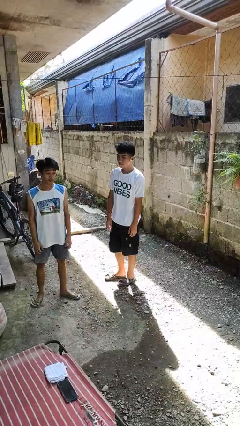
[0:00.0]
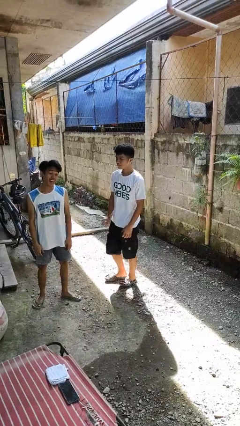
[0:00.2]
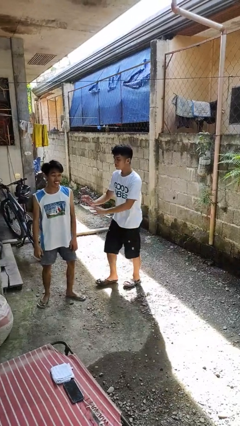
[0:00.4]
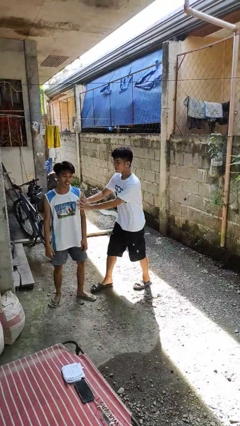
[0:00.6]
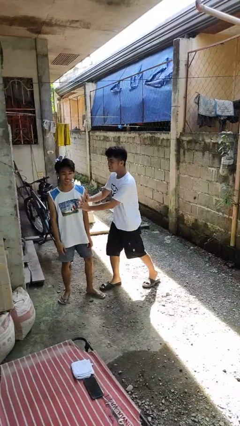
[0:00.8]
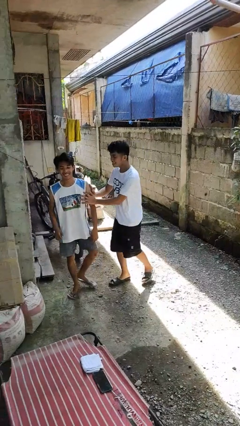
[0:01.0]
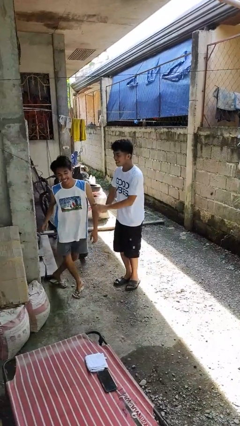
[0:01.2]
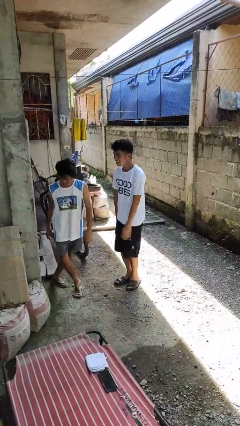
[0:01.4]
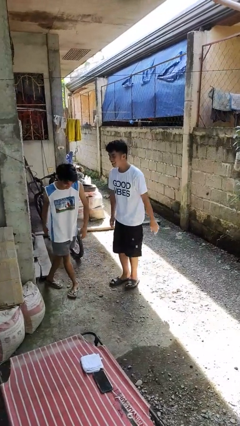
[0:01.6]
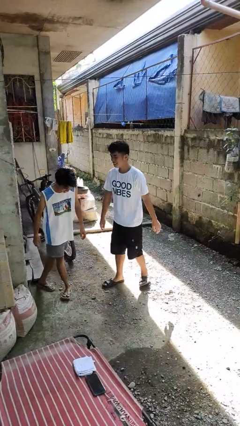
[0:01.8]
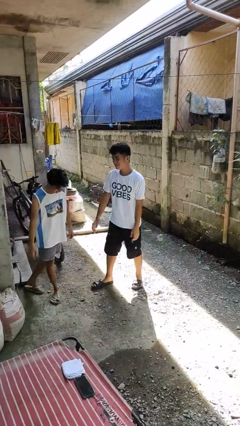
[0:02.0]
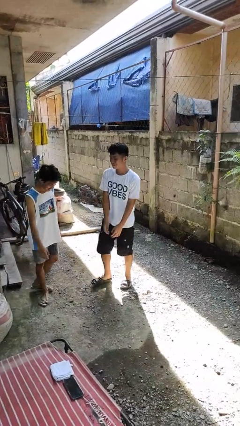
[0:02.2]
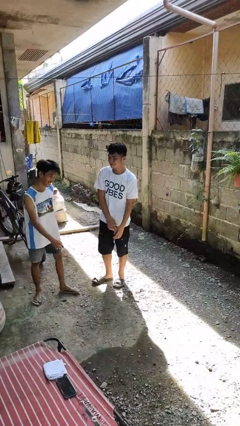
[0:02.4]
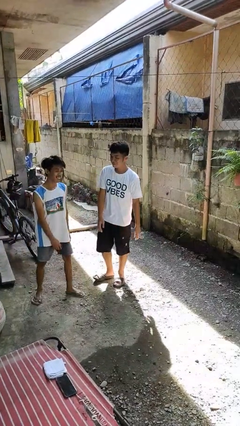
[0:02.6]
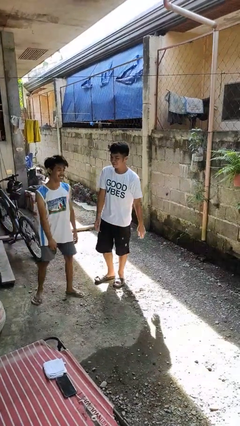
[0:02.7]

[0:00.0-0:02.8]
person shoves person

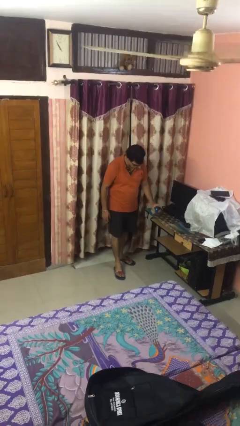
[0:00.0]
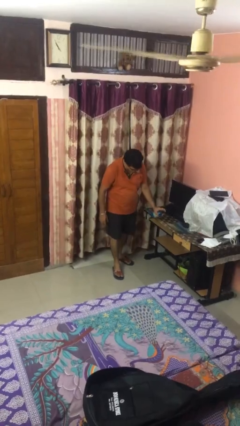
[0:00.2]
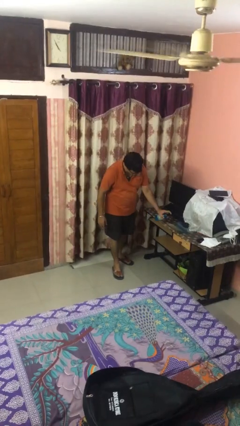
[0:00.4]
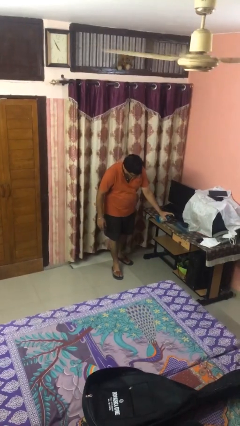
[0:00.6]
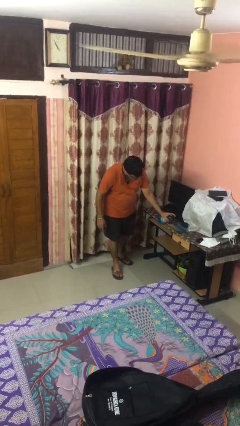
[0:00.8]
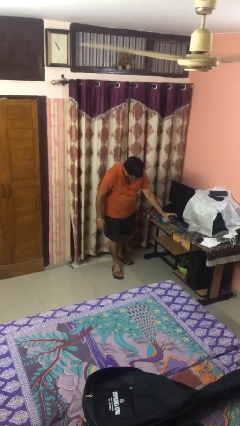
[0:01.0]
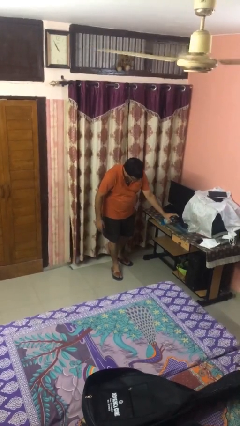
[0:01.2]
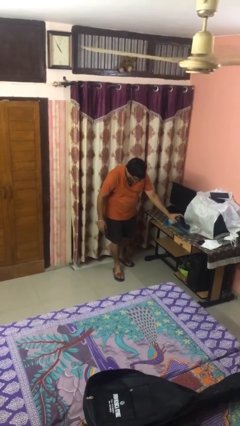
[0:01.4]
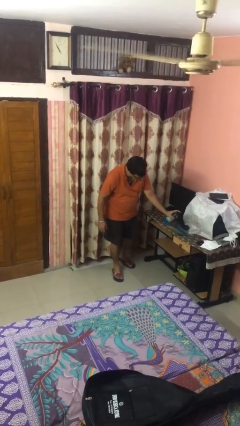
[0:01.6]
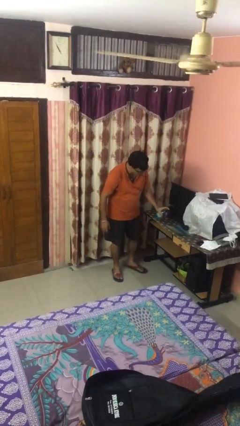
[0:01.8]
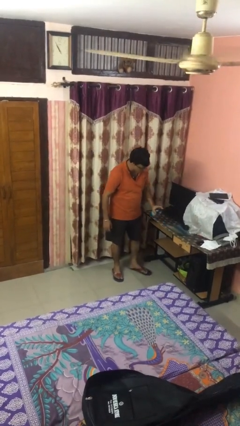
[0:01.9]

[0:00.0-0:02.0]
person sprays from bottle

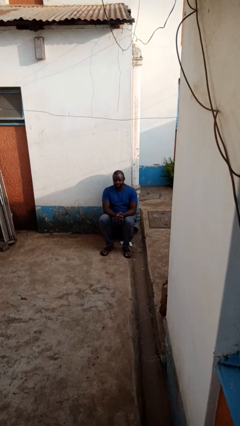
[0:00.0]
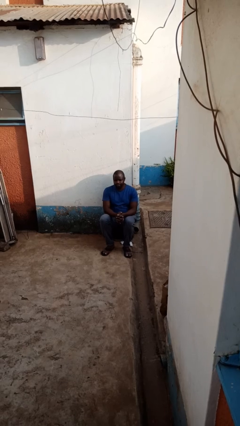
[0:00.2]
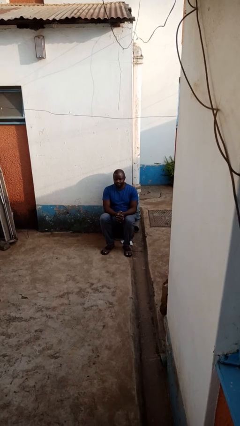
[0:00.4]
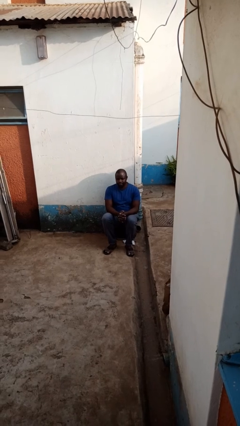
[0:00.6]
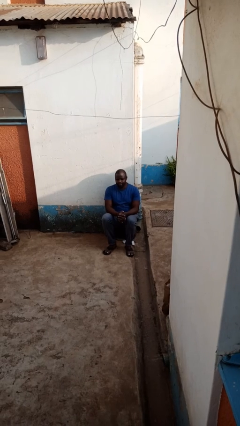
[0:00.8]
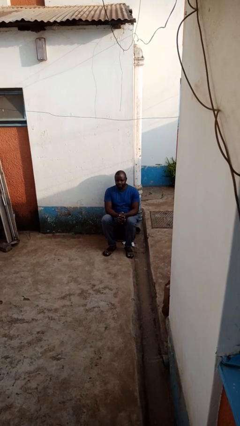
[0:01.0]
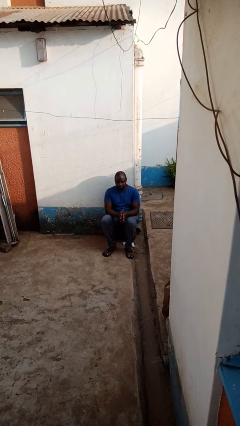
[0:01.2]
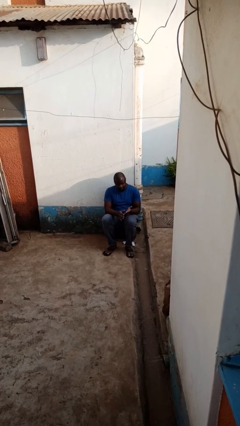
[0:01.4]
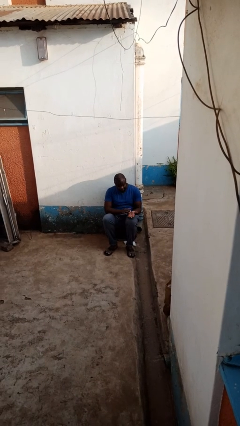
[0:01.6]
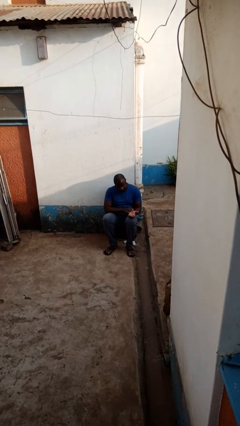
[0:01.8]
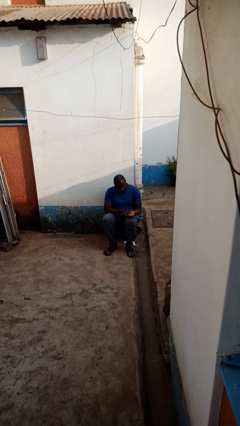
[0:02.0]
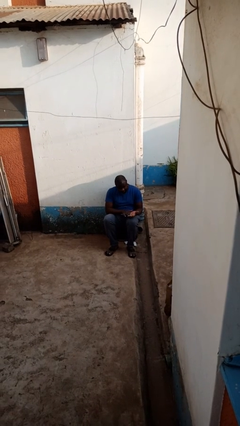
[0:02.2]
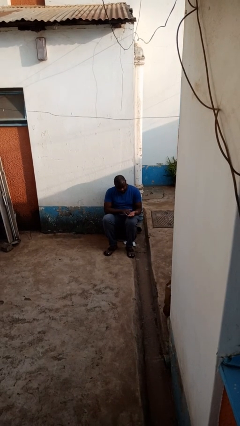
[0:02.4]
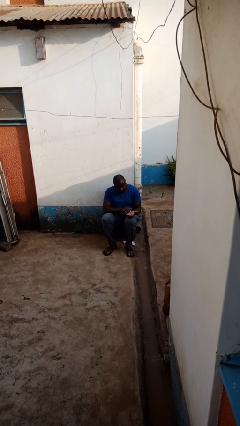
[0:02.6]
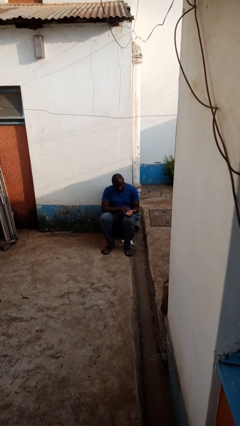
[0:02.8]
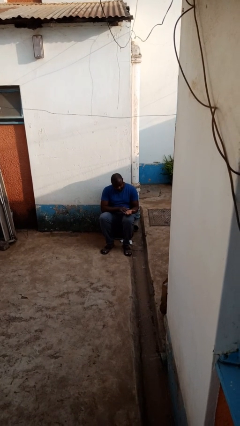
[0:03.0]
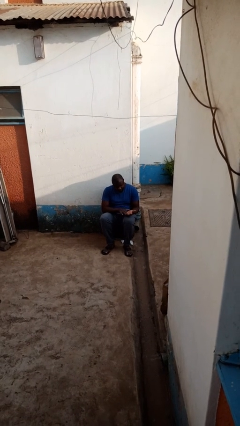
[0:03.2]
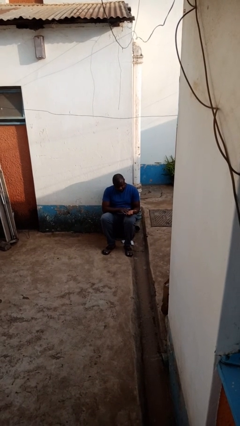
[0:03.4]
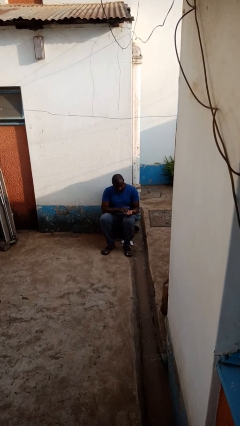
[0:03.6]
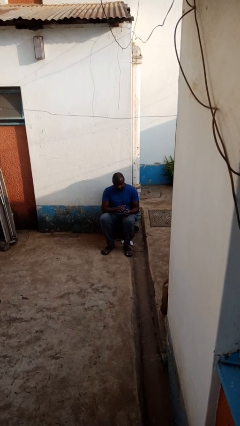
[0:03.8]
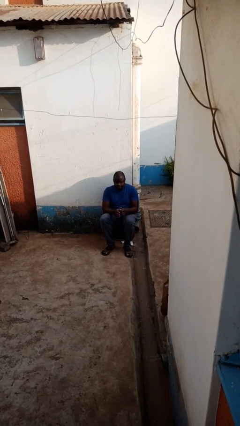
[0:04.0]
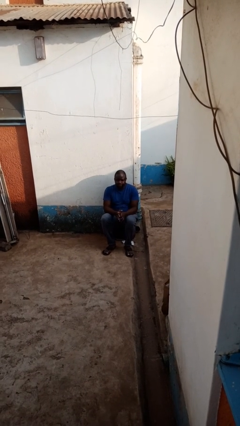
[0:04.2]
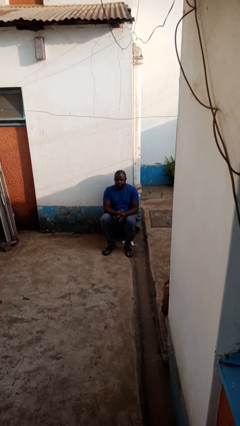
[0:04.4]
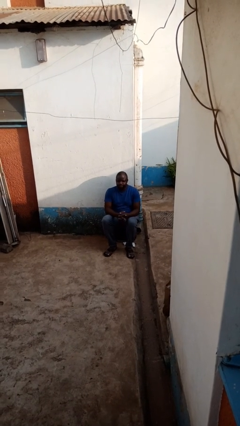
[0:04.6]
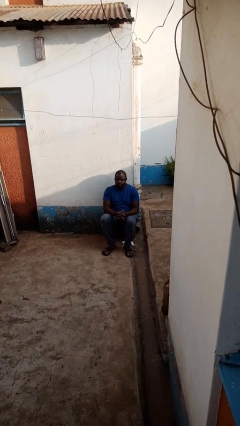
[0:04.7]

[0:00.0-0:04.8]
person looks at hands in lap

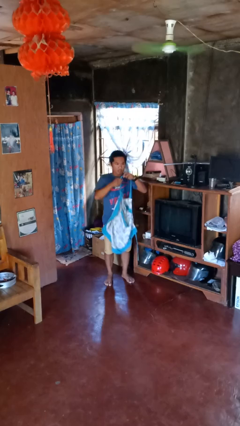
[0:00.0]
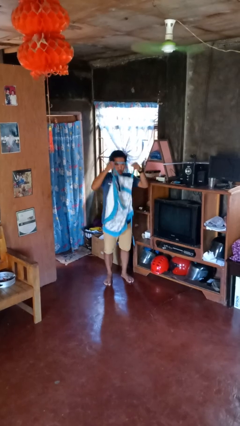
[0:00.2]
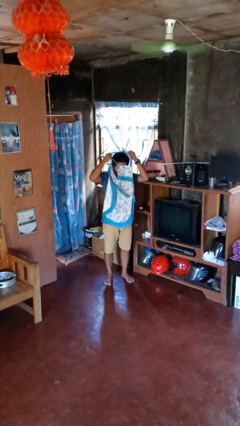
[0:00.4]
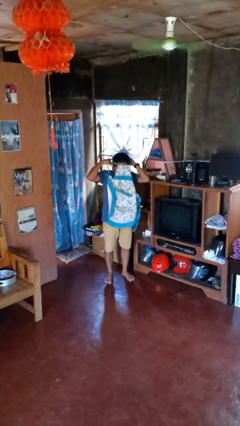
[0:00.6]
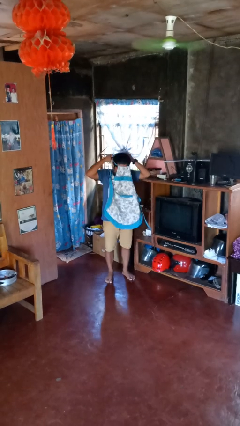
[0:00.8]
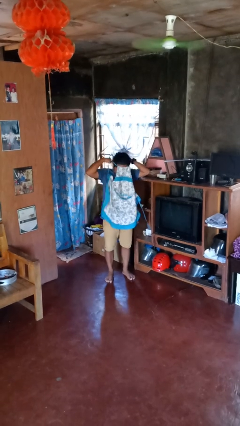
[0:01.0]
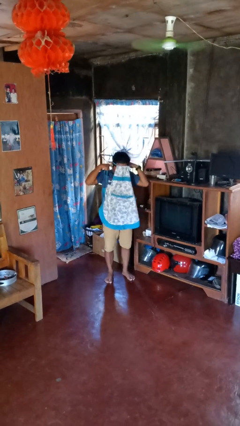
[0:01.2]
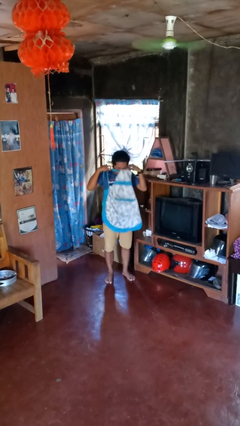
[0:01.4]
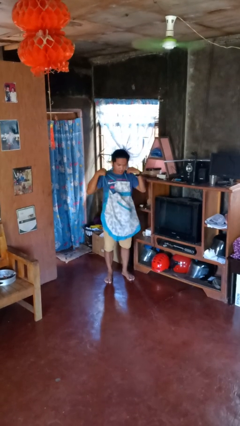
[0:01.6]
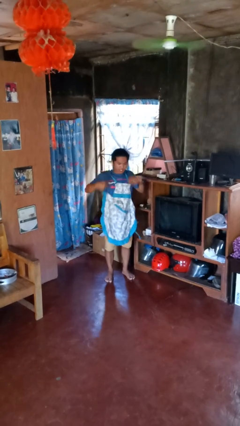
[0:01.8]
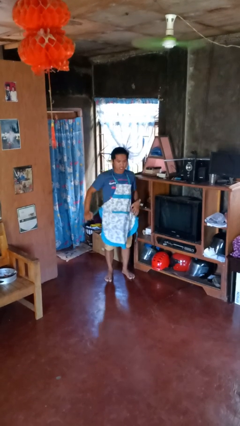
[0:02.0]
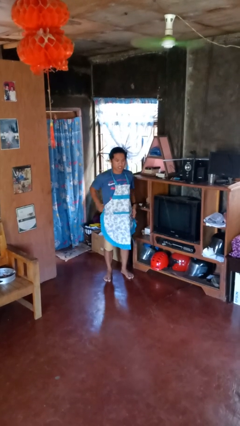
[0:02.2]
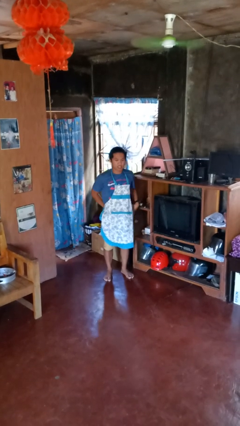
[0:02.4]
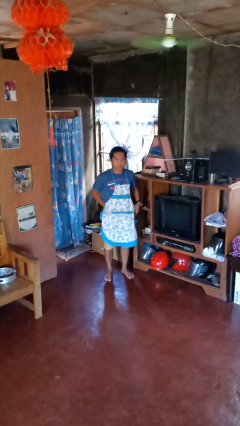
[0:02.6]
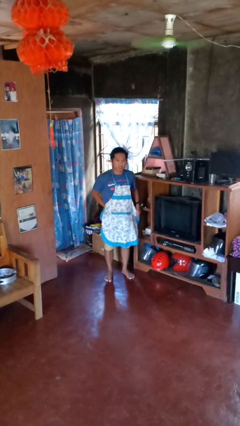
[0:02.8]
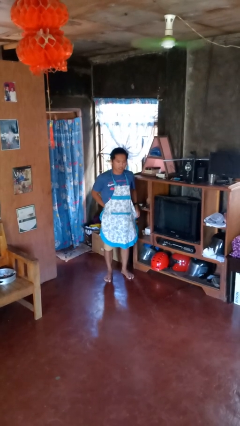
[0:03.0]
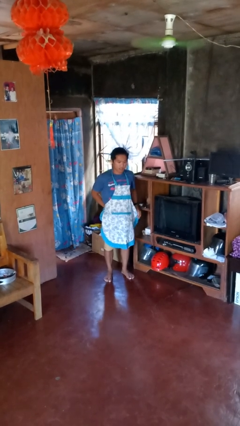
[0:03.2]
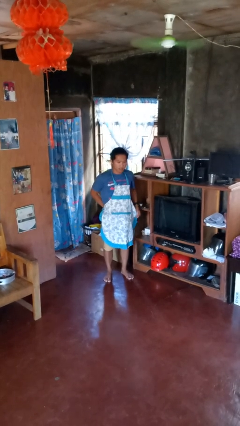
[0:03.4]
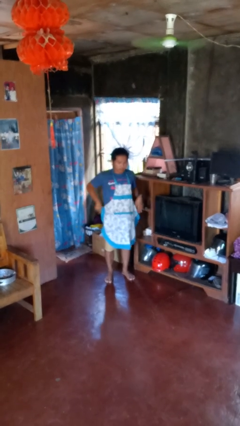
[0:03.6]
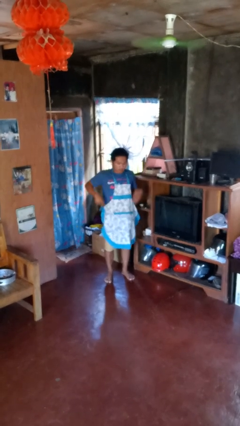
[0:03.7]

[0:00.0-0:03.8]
person puts on apron

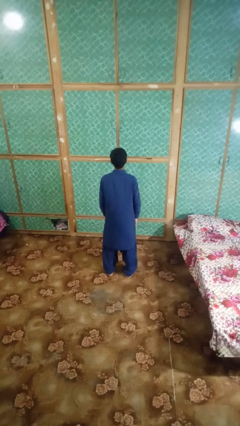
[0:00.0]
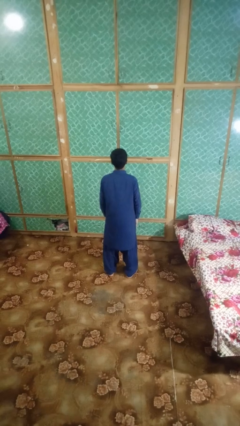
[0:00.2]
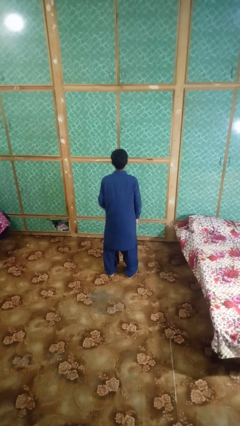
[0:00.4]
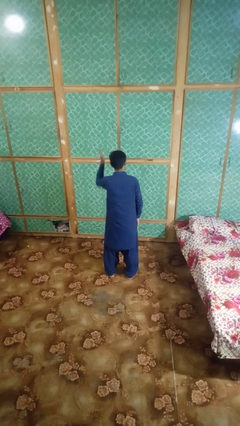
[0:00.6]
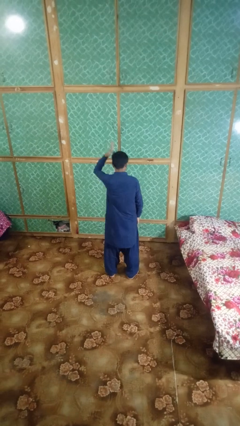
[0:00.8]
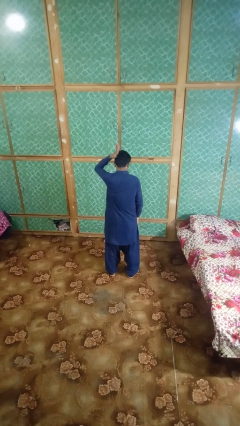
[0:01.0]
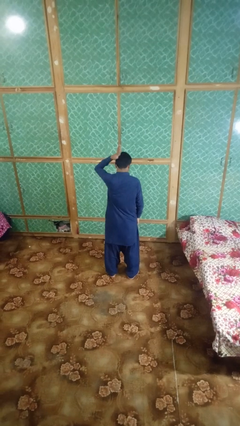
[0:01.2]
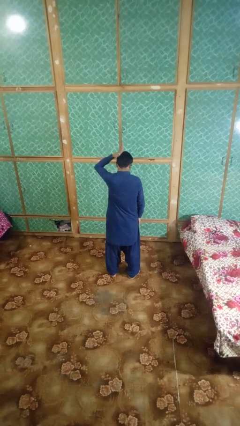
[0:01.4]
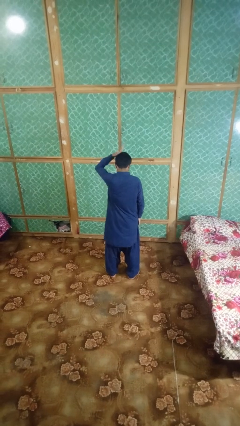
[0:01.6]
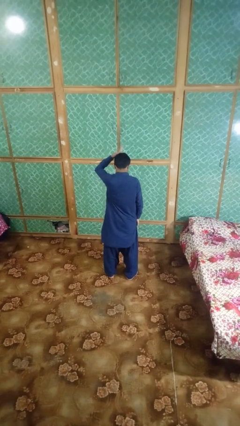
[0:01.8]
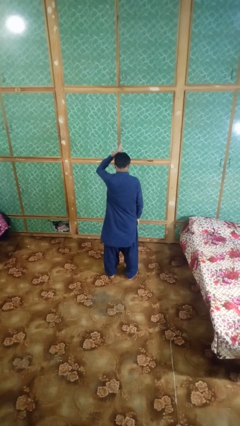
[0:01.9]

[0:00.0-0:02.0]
person pats head

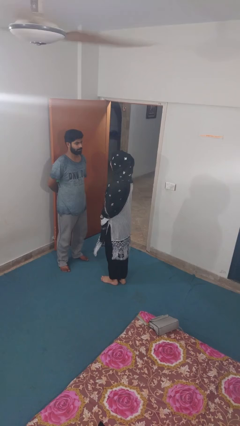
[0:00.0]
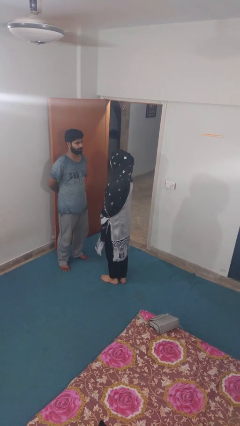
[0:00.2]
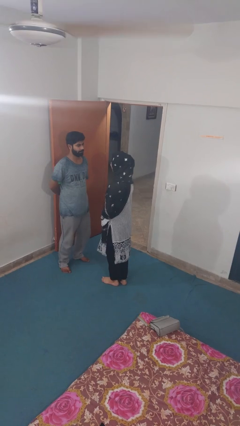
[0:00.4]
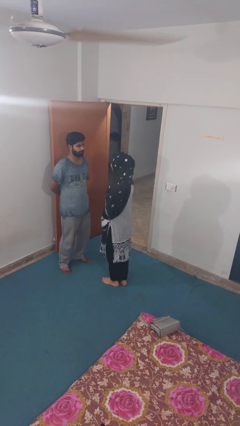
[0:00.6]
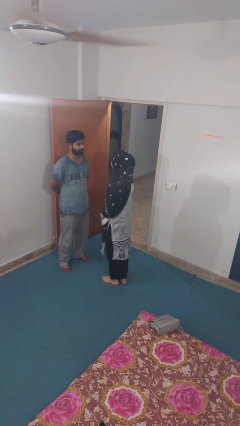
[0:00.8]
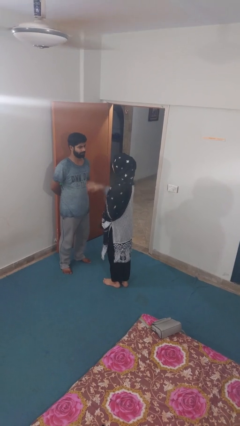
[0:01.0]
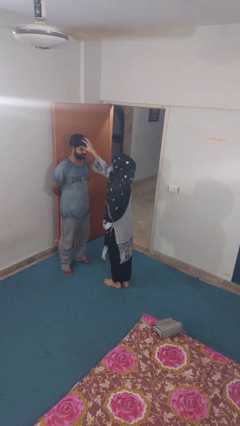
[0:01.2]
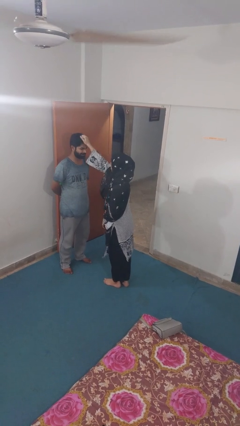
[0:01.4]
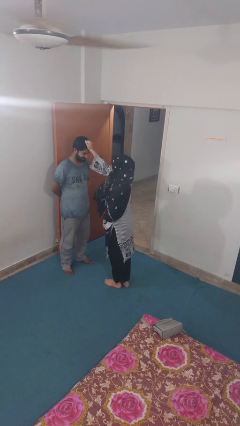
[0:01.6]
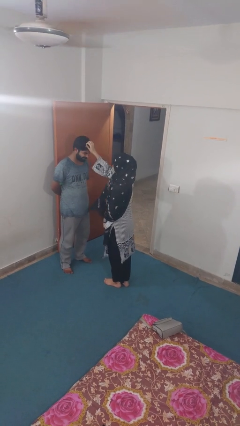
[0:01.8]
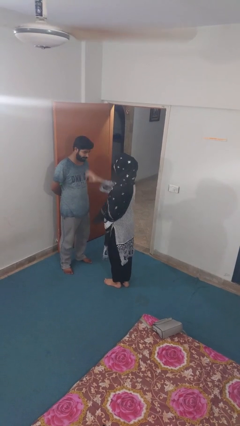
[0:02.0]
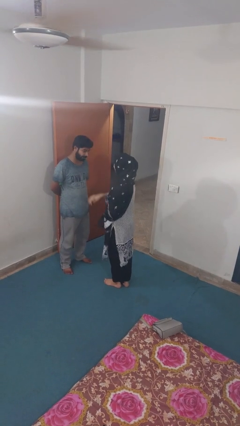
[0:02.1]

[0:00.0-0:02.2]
person grabs person by hair
